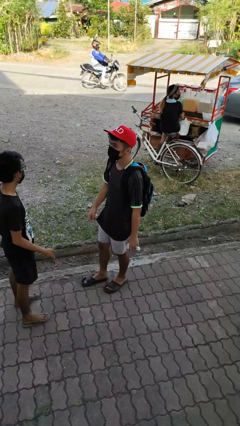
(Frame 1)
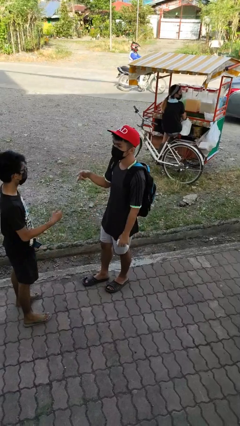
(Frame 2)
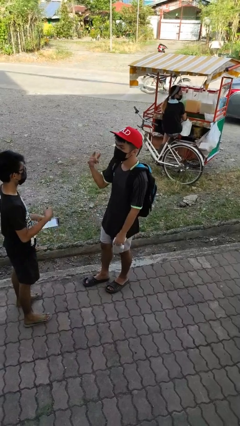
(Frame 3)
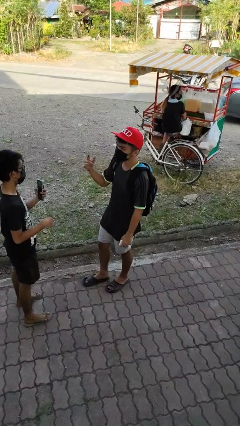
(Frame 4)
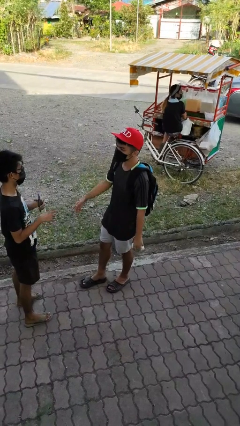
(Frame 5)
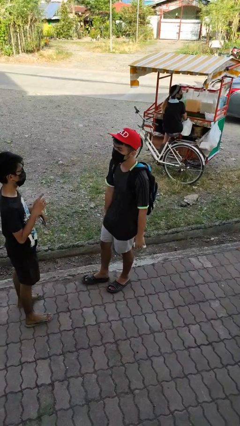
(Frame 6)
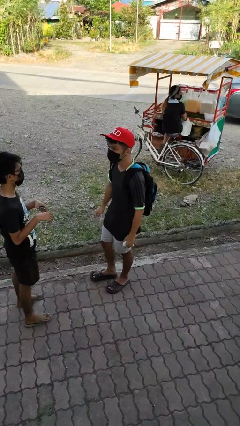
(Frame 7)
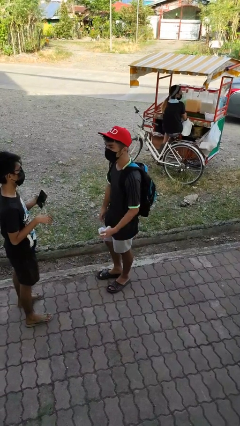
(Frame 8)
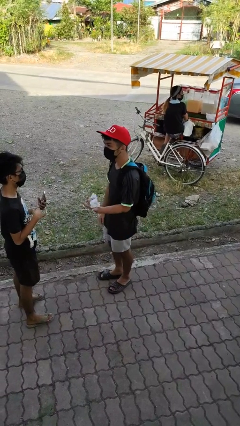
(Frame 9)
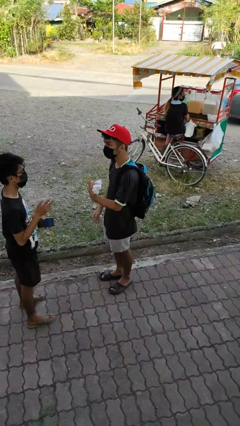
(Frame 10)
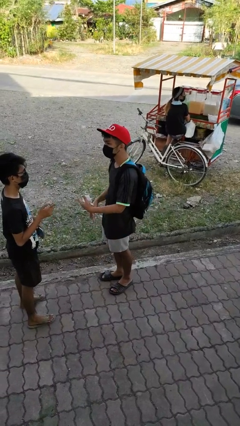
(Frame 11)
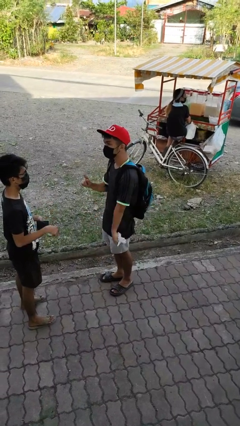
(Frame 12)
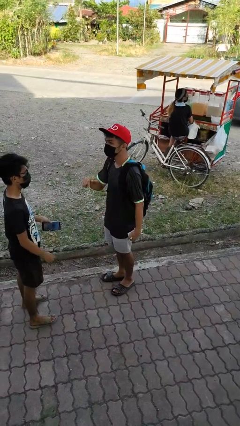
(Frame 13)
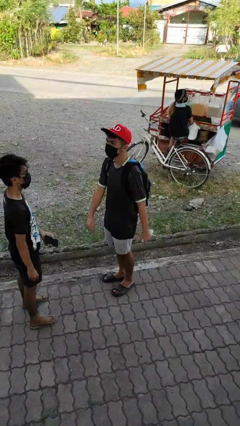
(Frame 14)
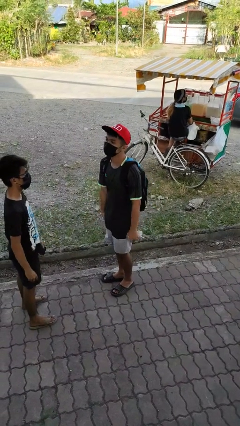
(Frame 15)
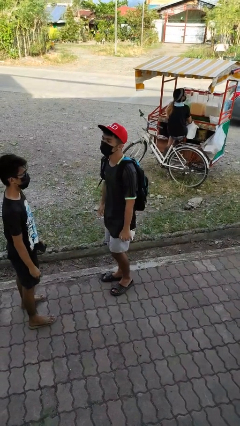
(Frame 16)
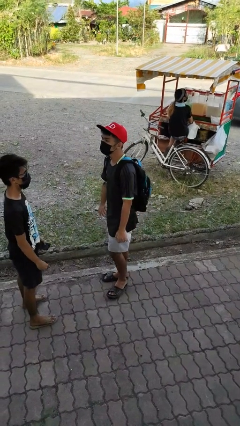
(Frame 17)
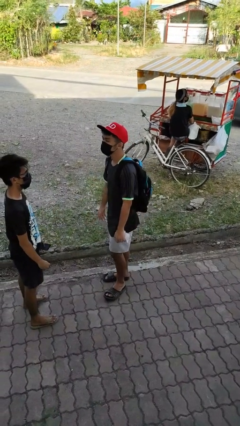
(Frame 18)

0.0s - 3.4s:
person talks to person

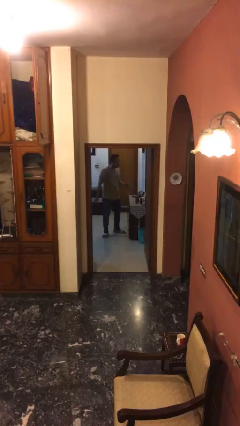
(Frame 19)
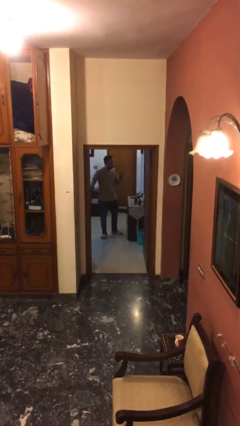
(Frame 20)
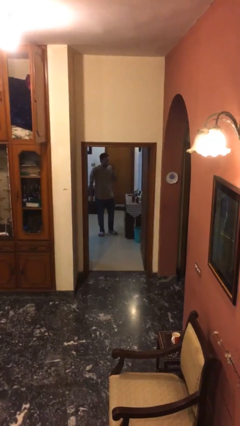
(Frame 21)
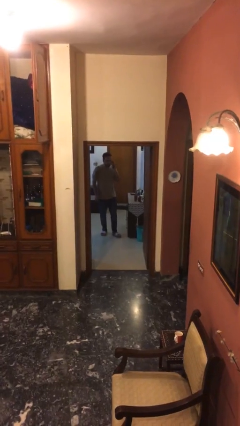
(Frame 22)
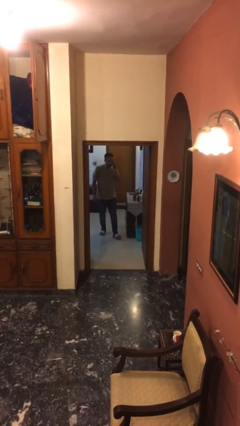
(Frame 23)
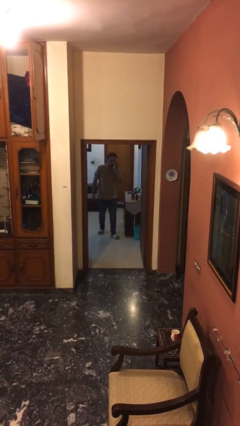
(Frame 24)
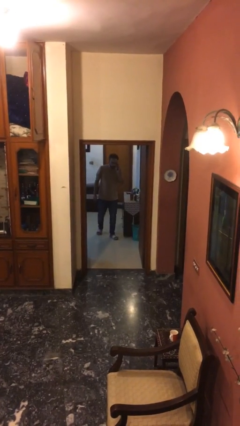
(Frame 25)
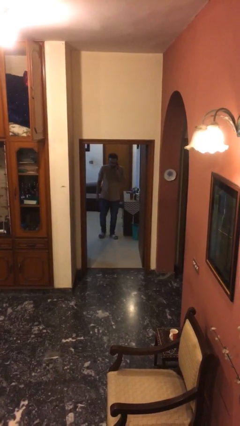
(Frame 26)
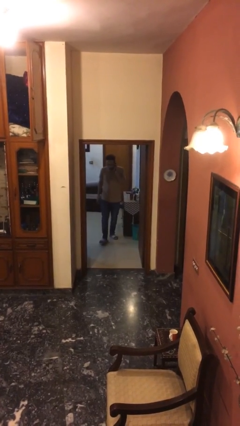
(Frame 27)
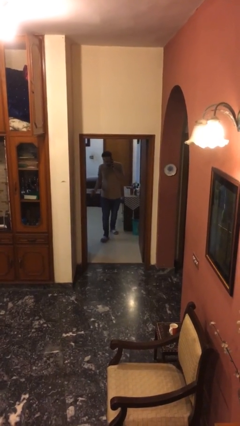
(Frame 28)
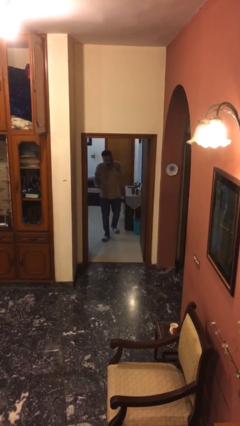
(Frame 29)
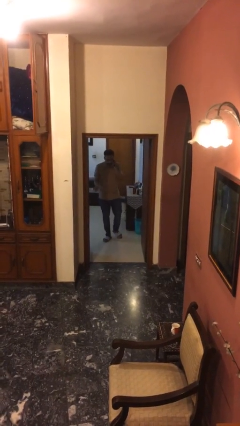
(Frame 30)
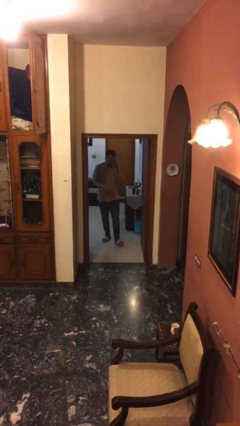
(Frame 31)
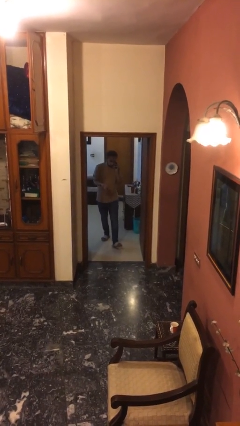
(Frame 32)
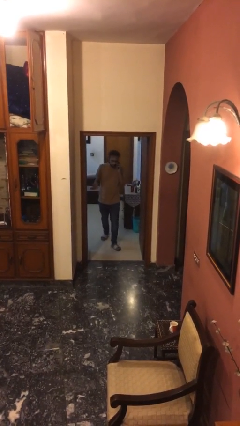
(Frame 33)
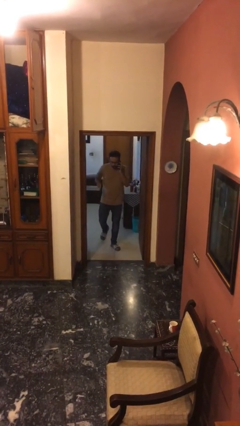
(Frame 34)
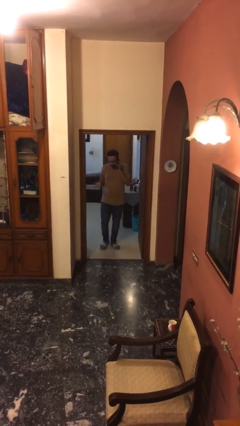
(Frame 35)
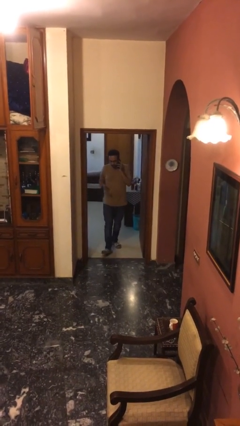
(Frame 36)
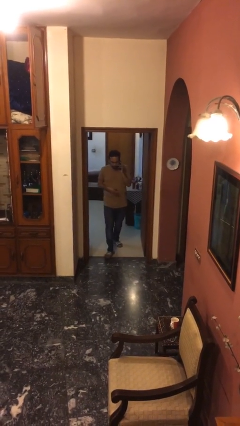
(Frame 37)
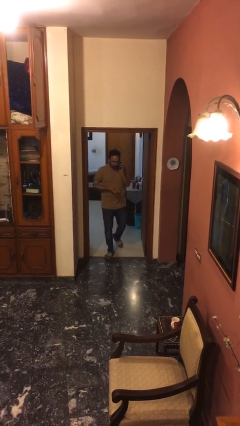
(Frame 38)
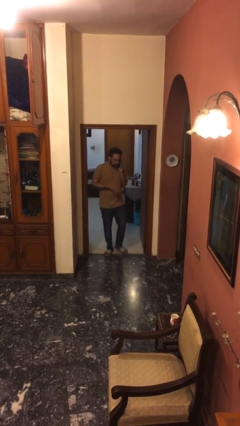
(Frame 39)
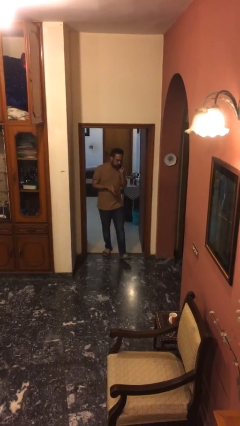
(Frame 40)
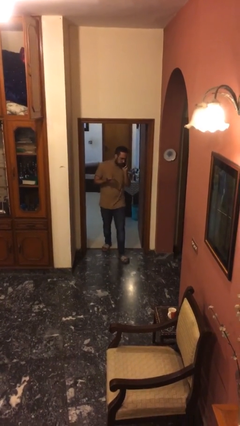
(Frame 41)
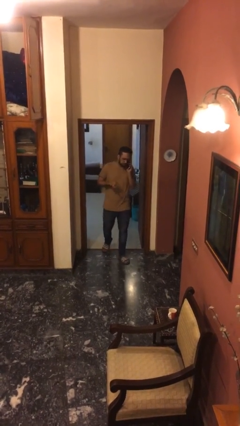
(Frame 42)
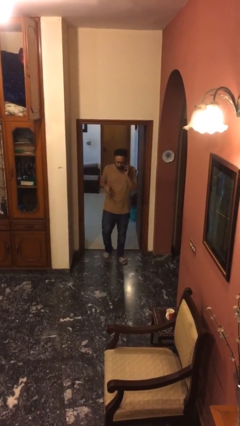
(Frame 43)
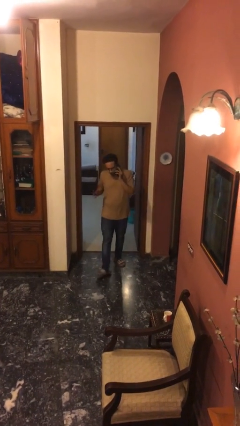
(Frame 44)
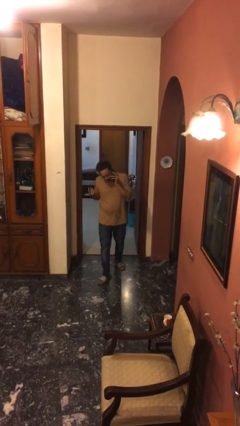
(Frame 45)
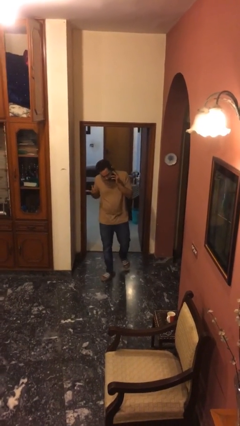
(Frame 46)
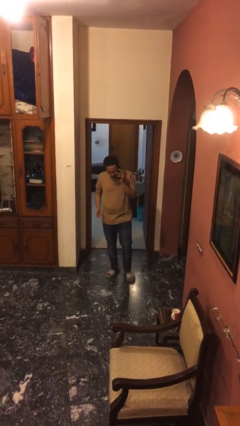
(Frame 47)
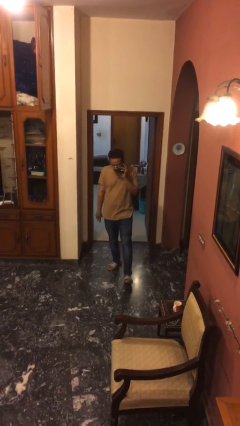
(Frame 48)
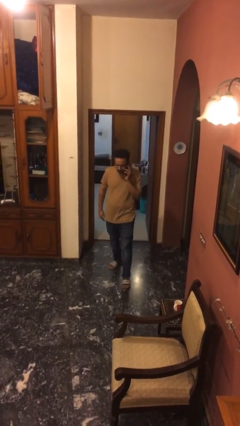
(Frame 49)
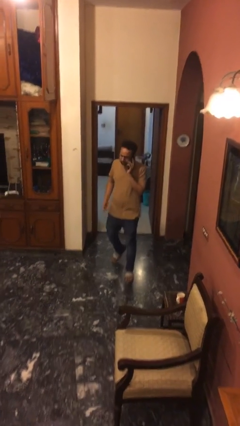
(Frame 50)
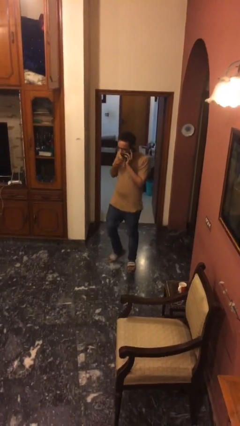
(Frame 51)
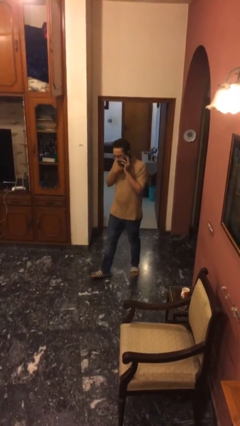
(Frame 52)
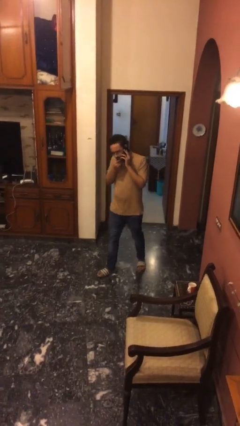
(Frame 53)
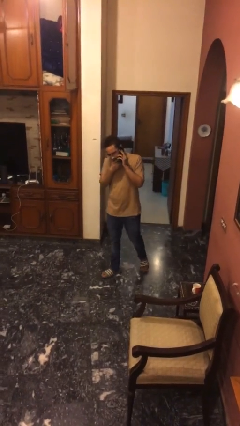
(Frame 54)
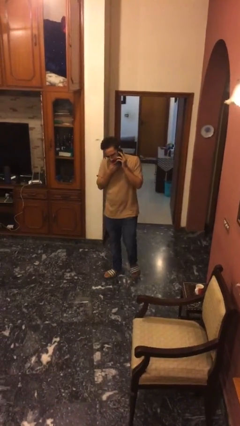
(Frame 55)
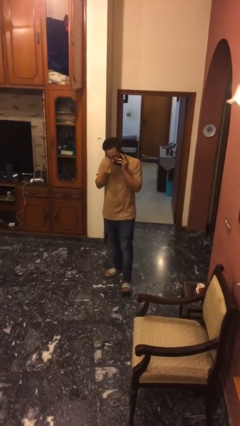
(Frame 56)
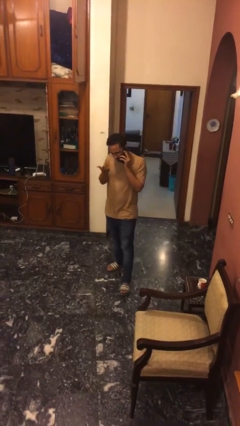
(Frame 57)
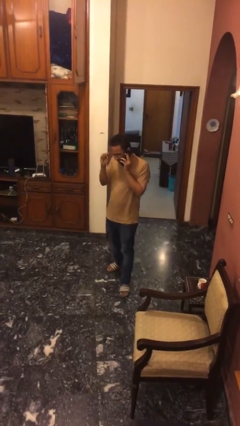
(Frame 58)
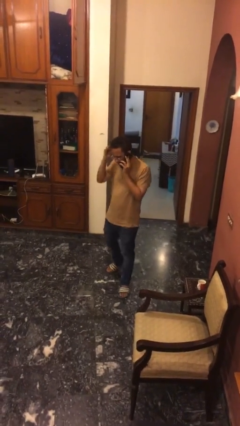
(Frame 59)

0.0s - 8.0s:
person enters scene through structure

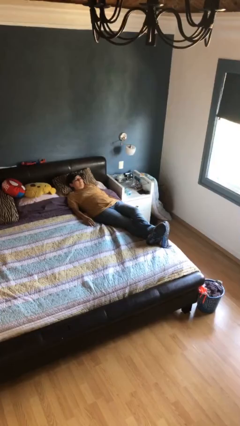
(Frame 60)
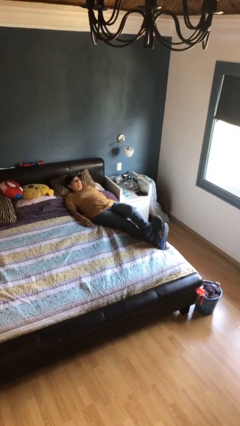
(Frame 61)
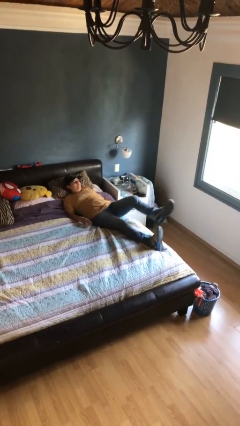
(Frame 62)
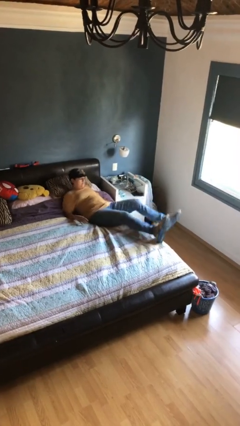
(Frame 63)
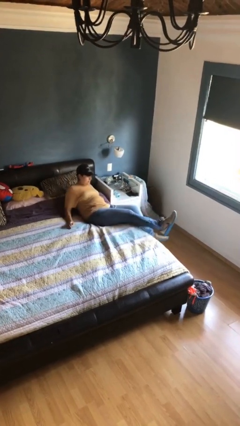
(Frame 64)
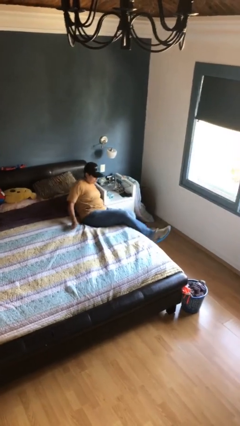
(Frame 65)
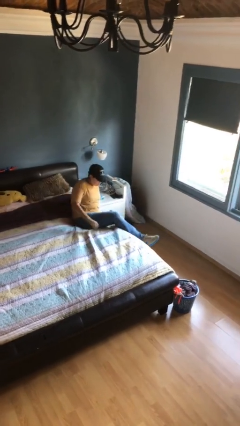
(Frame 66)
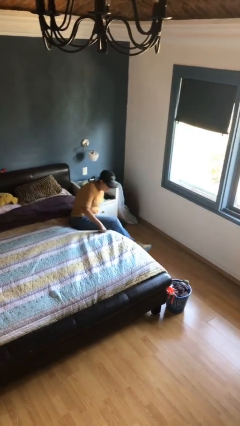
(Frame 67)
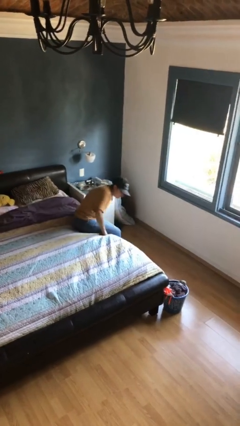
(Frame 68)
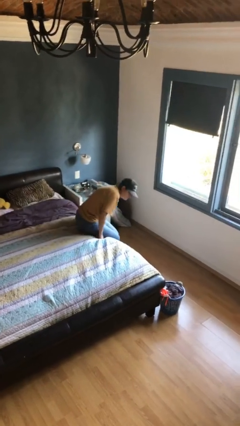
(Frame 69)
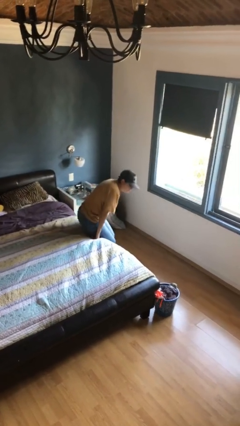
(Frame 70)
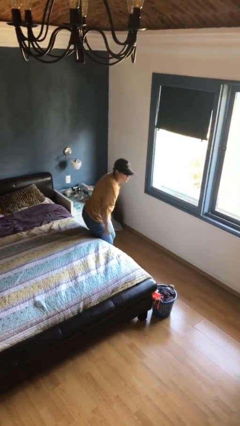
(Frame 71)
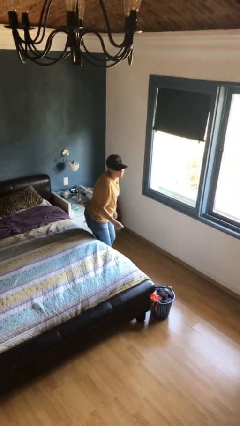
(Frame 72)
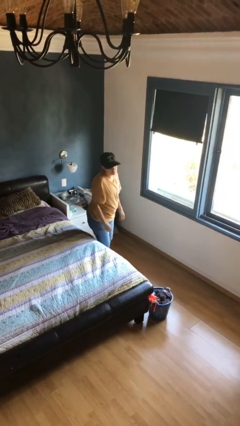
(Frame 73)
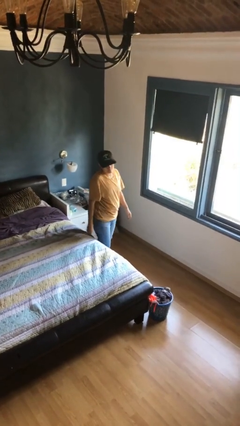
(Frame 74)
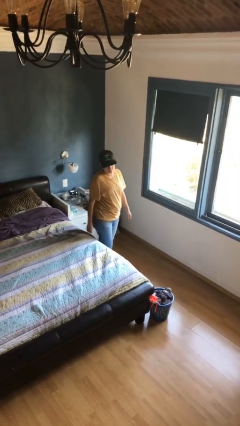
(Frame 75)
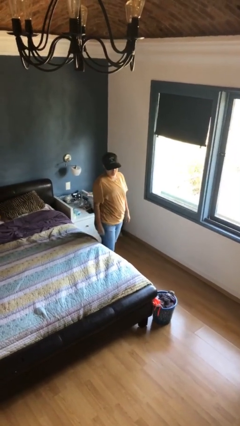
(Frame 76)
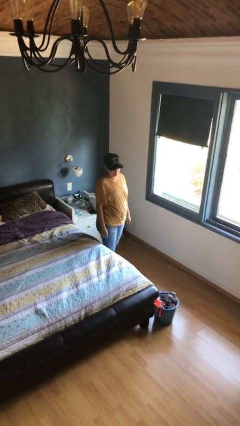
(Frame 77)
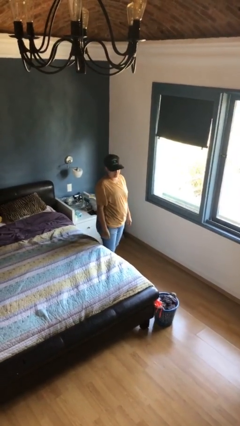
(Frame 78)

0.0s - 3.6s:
person stands up

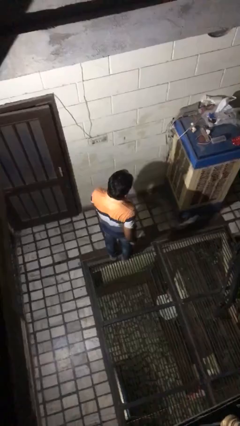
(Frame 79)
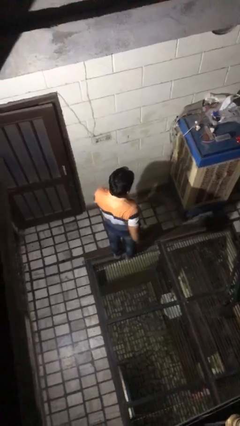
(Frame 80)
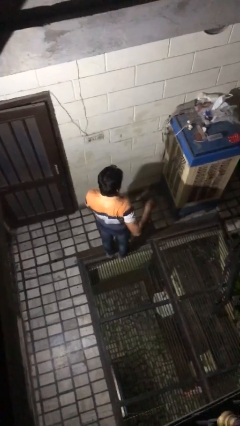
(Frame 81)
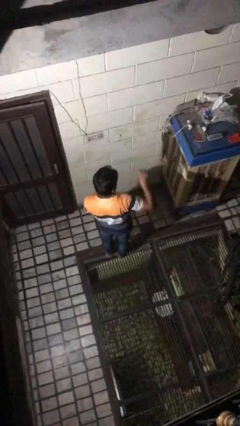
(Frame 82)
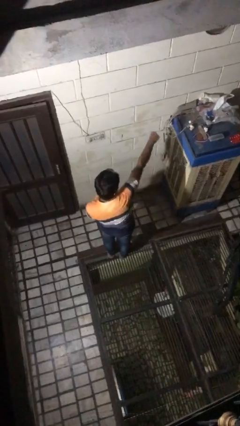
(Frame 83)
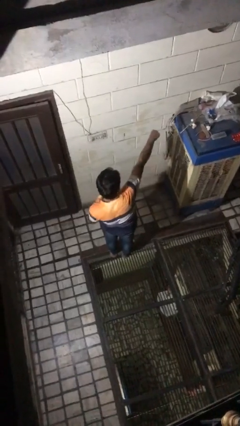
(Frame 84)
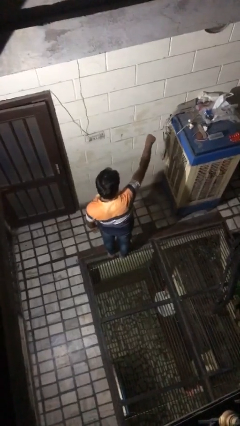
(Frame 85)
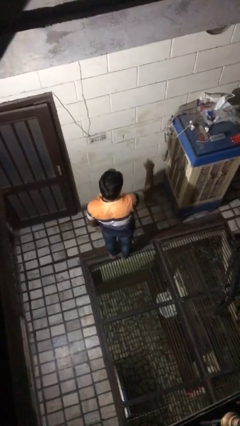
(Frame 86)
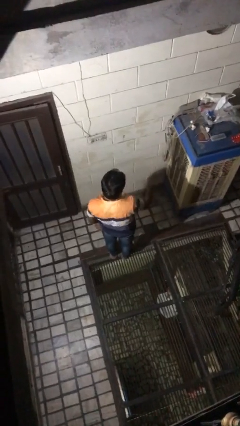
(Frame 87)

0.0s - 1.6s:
person punches

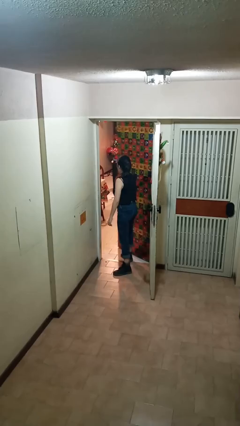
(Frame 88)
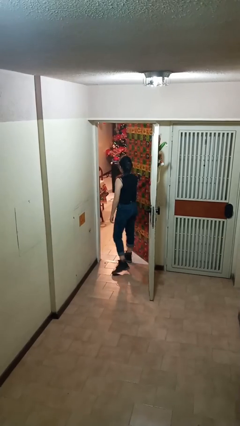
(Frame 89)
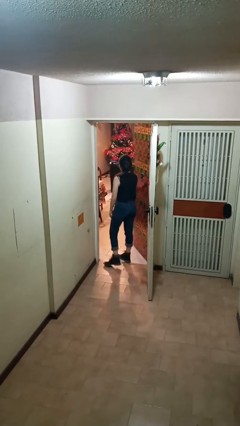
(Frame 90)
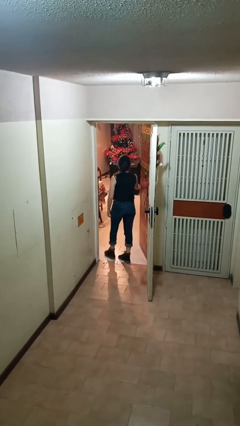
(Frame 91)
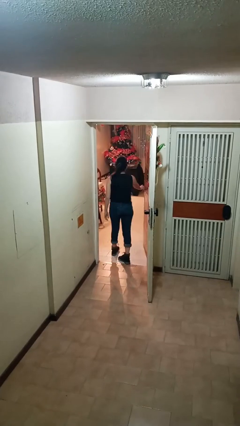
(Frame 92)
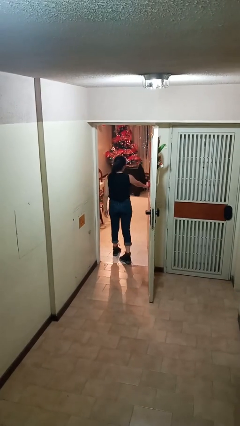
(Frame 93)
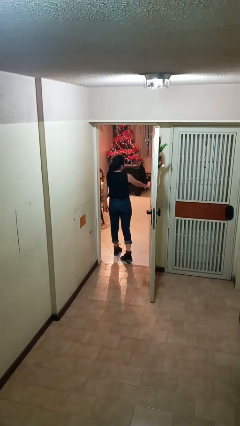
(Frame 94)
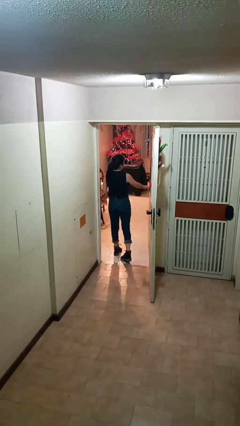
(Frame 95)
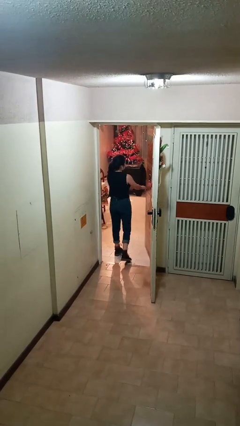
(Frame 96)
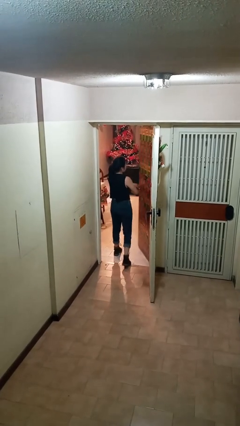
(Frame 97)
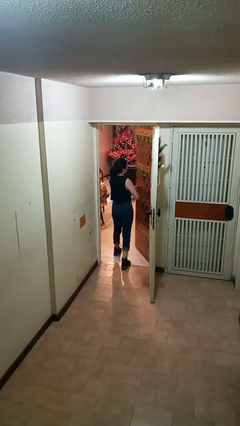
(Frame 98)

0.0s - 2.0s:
person opens facility door
